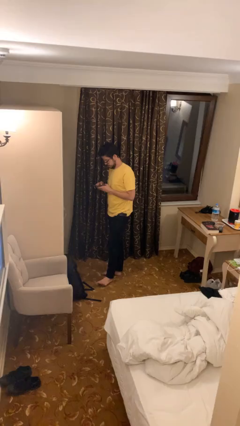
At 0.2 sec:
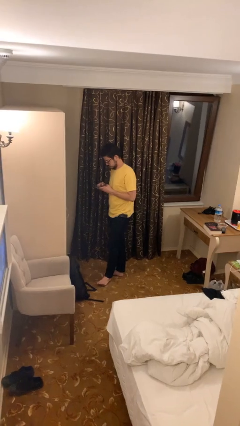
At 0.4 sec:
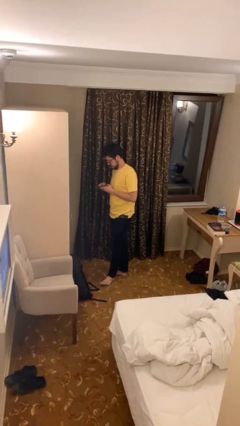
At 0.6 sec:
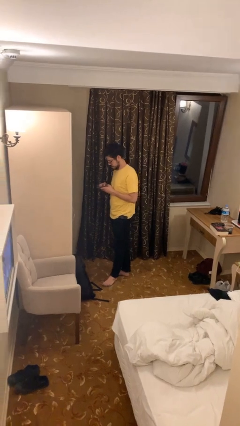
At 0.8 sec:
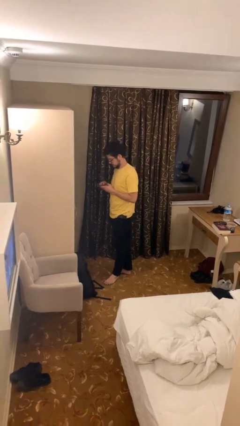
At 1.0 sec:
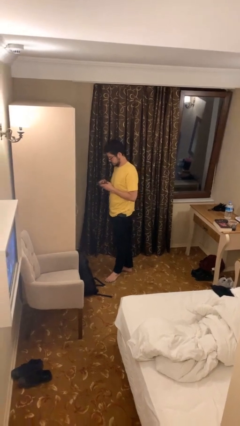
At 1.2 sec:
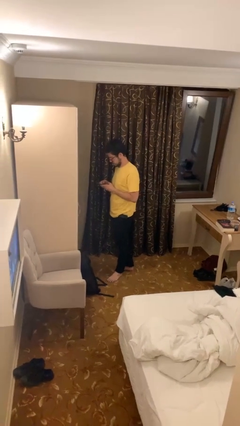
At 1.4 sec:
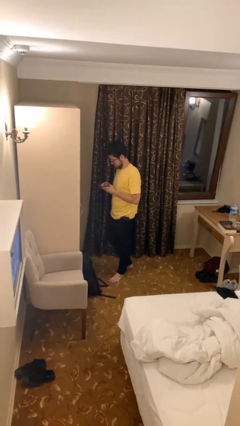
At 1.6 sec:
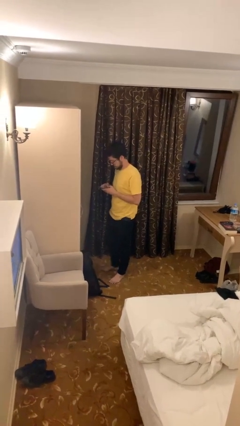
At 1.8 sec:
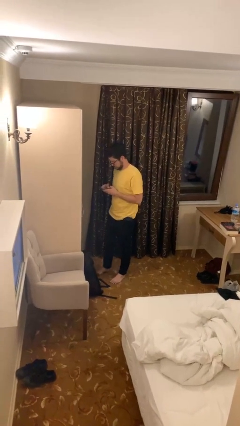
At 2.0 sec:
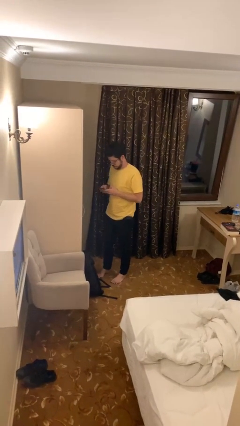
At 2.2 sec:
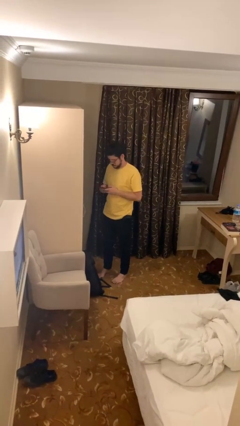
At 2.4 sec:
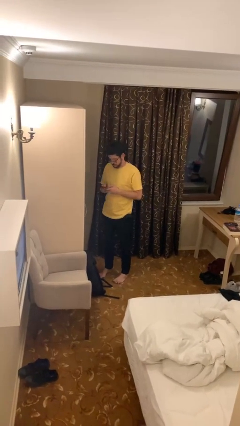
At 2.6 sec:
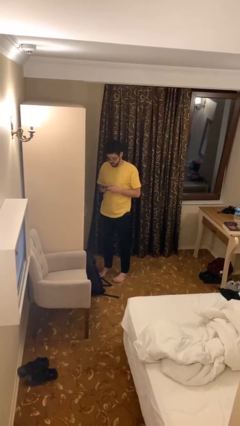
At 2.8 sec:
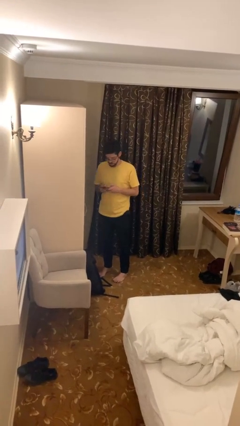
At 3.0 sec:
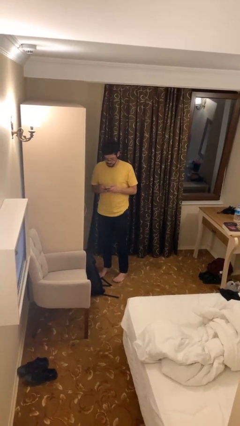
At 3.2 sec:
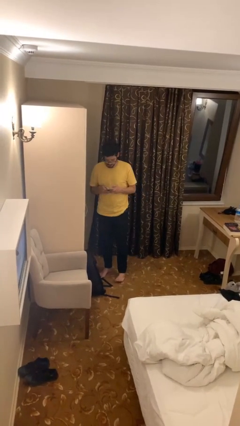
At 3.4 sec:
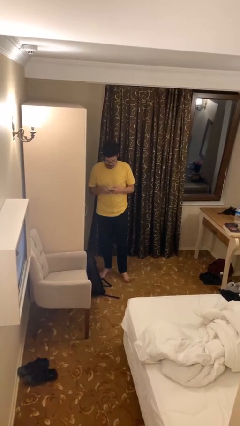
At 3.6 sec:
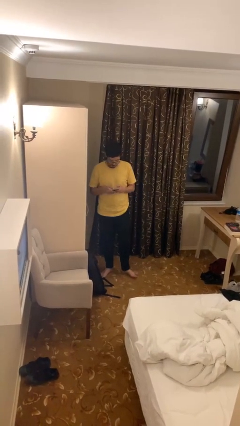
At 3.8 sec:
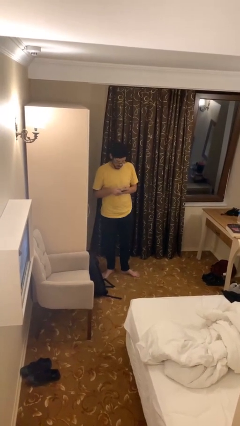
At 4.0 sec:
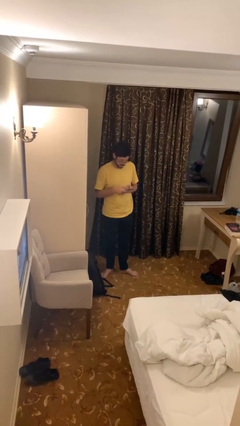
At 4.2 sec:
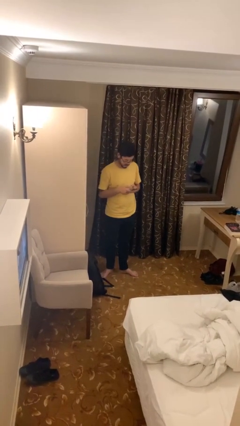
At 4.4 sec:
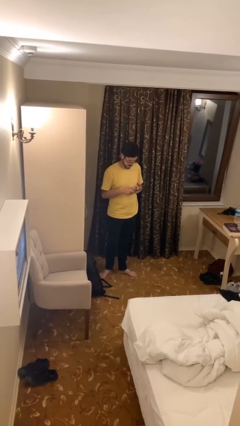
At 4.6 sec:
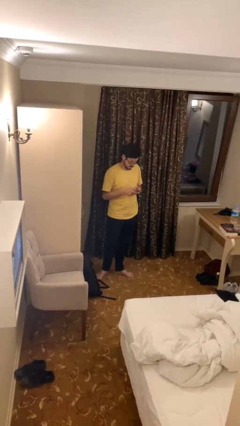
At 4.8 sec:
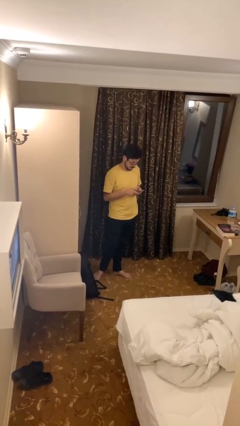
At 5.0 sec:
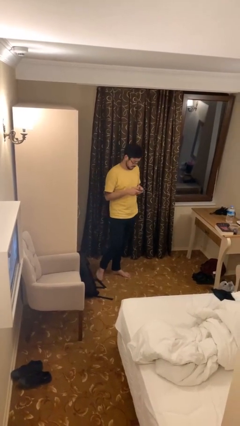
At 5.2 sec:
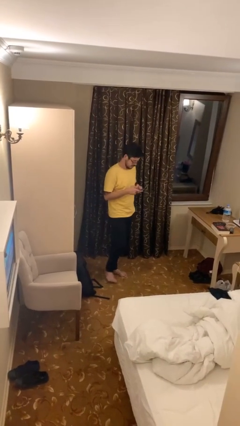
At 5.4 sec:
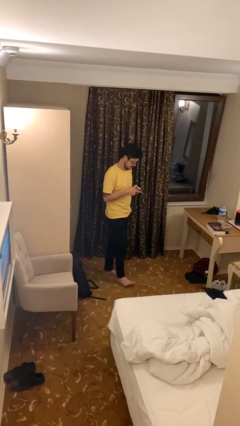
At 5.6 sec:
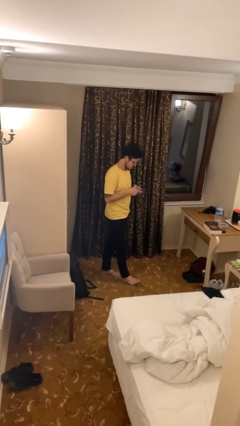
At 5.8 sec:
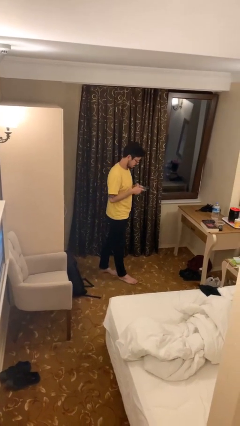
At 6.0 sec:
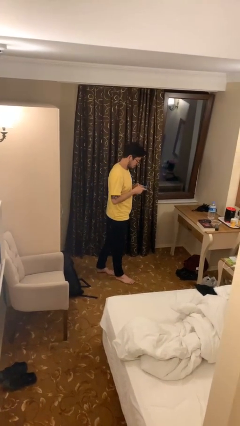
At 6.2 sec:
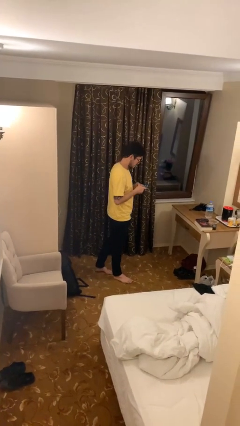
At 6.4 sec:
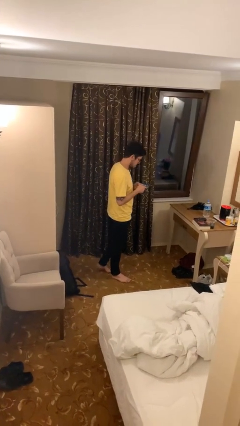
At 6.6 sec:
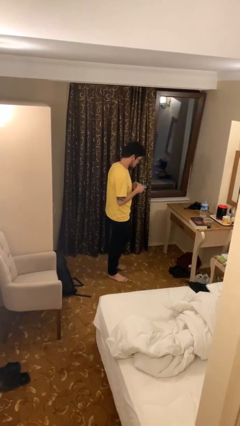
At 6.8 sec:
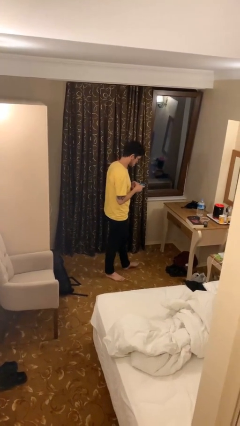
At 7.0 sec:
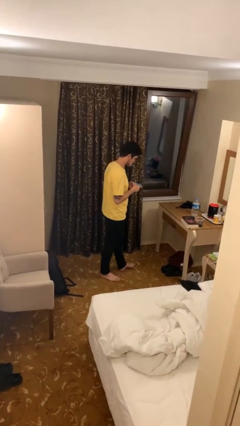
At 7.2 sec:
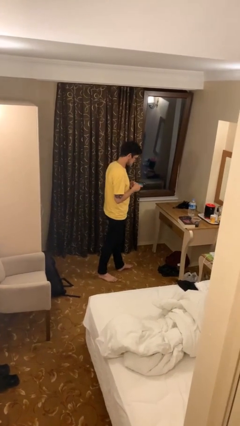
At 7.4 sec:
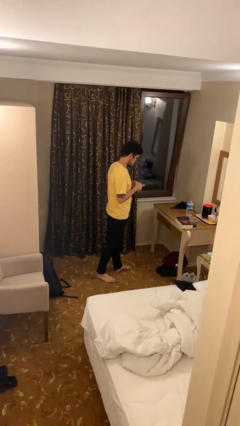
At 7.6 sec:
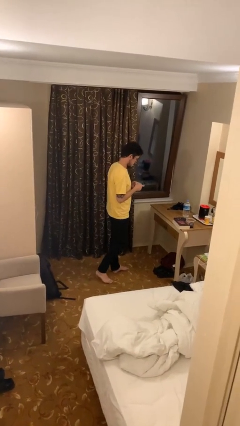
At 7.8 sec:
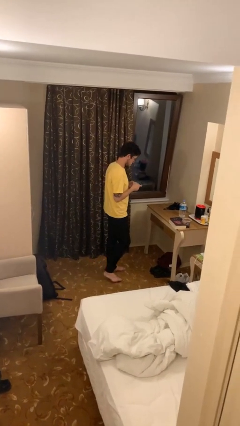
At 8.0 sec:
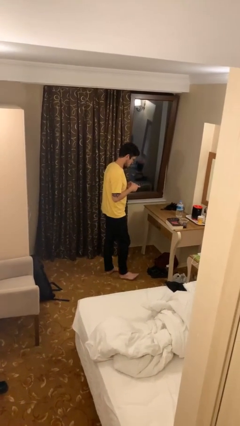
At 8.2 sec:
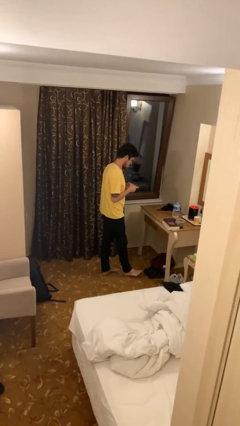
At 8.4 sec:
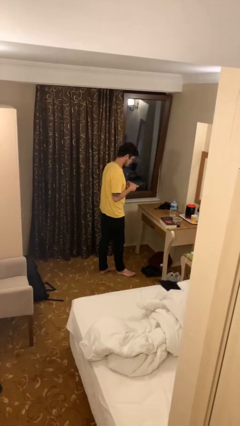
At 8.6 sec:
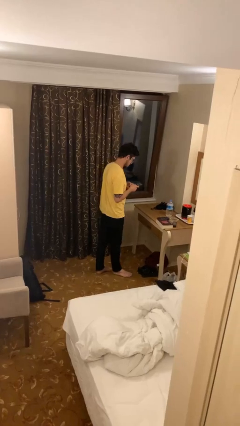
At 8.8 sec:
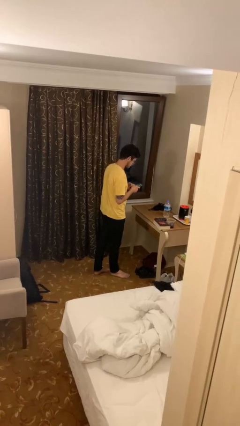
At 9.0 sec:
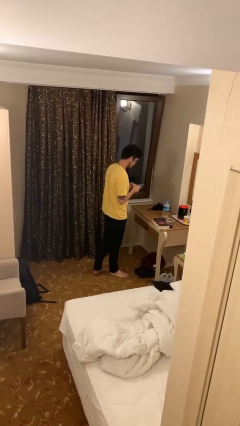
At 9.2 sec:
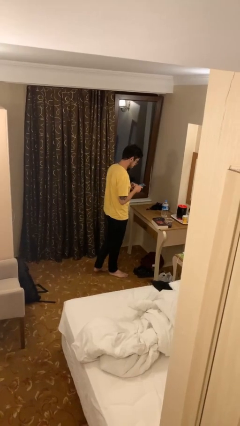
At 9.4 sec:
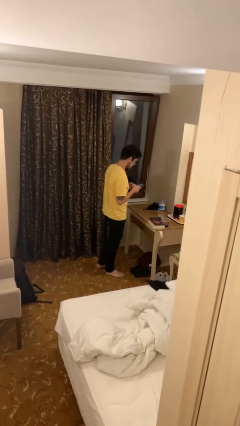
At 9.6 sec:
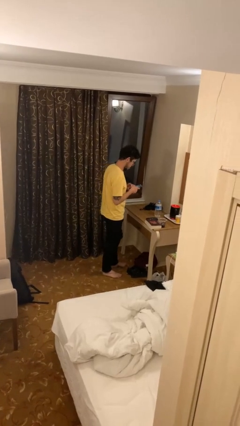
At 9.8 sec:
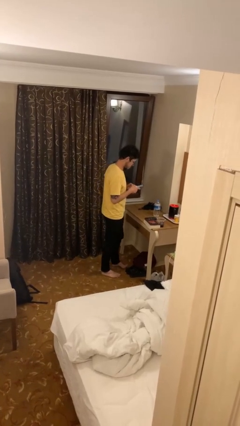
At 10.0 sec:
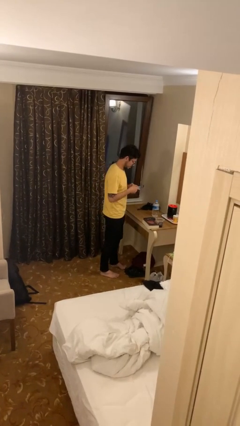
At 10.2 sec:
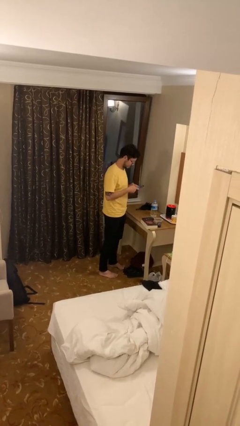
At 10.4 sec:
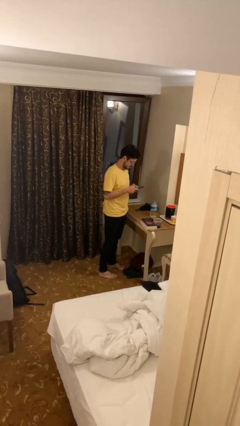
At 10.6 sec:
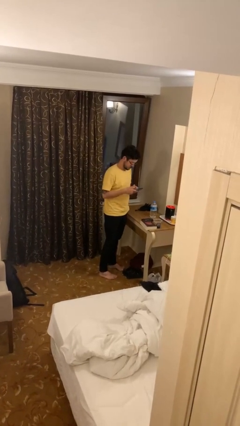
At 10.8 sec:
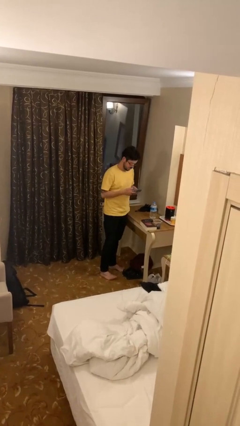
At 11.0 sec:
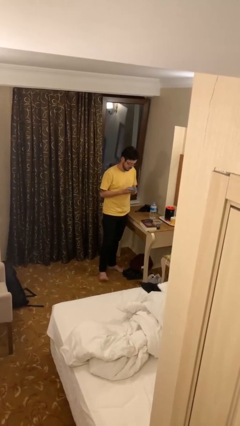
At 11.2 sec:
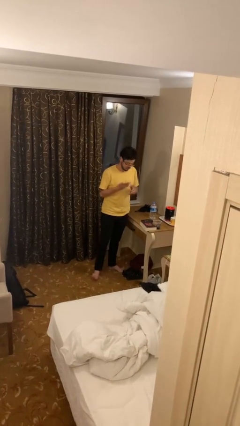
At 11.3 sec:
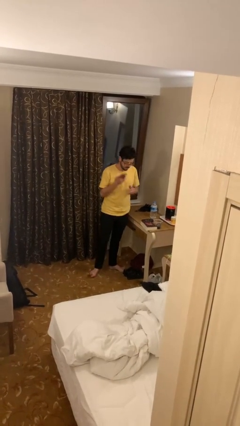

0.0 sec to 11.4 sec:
person texts on phone

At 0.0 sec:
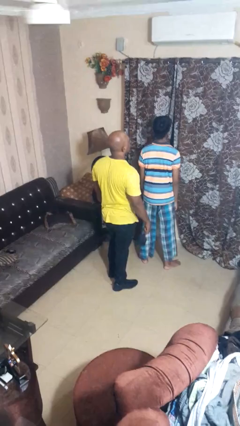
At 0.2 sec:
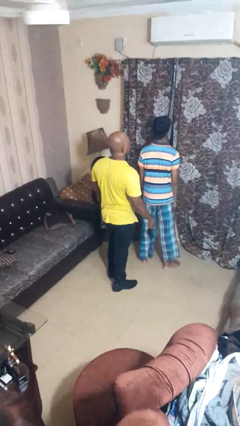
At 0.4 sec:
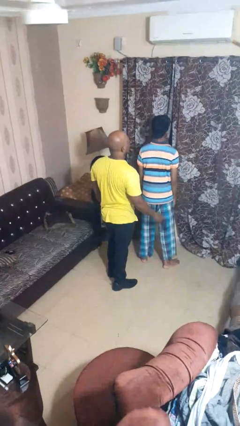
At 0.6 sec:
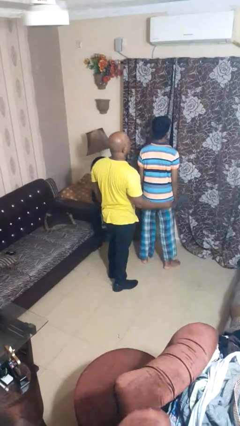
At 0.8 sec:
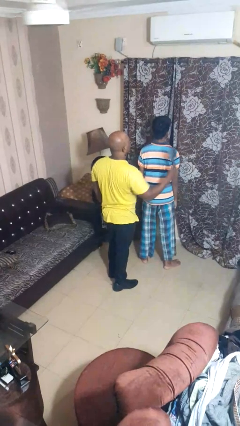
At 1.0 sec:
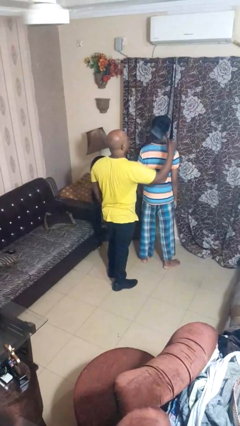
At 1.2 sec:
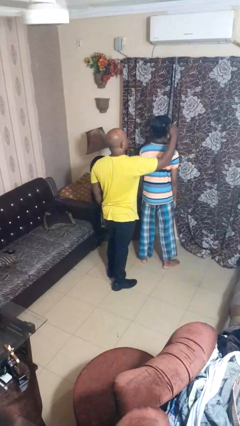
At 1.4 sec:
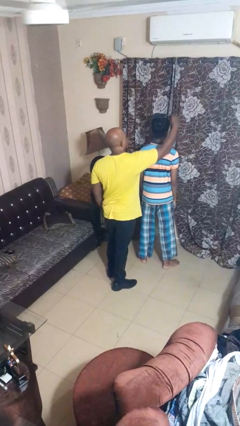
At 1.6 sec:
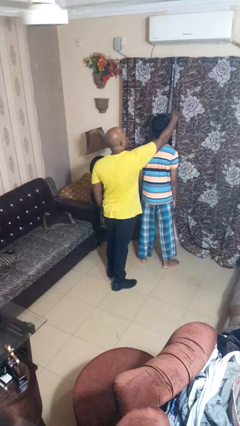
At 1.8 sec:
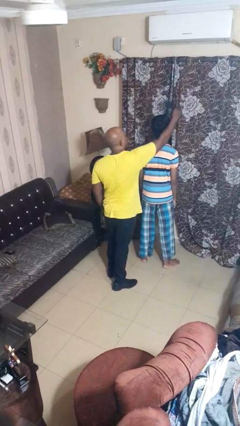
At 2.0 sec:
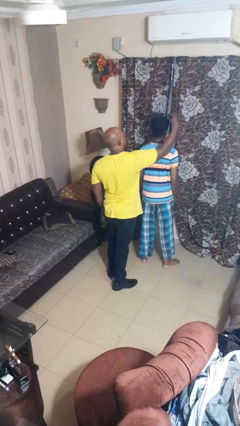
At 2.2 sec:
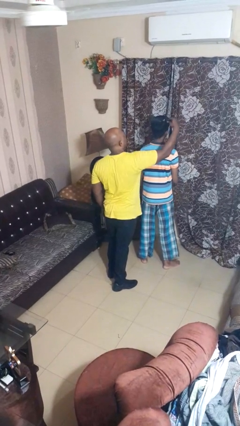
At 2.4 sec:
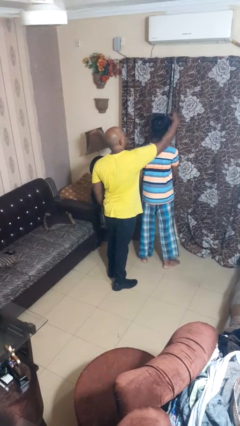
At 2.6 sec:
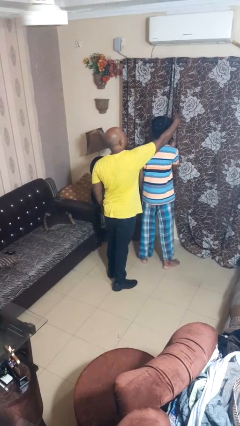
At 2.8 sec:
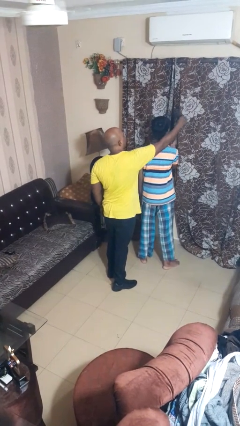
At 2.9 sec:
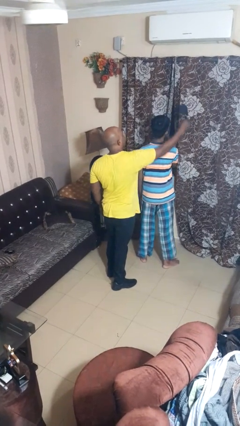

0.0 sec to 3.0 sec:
person brushes hair of person

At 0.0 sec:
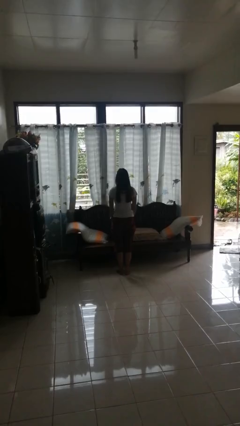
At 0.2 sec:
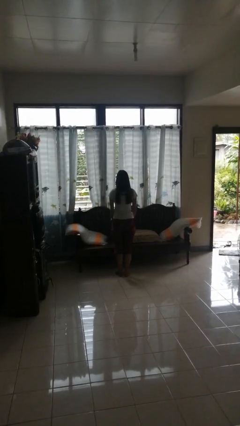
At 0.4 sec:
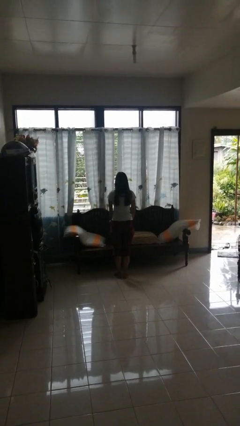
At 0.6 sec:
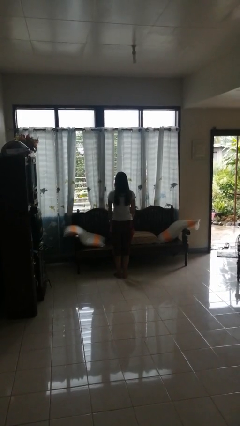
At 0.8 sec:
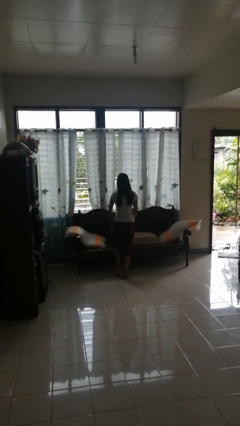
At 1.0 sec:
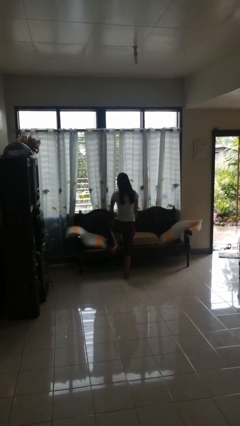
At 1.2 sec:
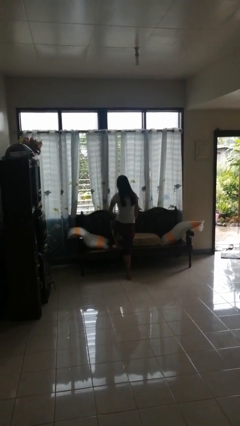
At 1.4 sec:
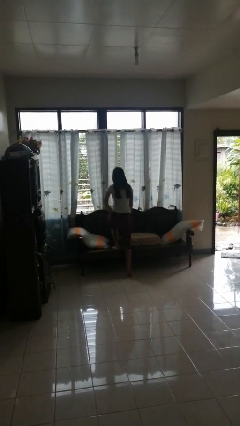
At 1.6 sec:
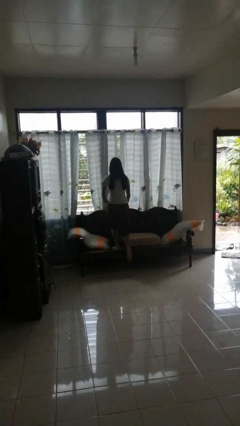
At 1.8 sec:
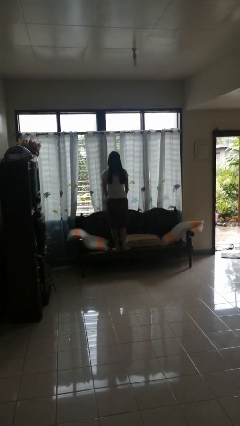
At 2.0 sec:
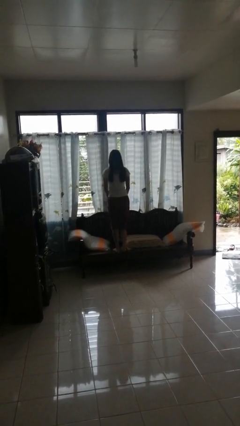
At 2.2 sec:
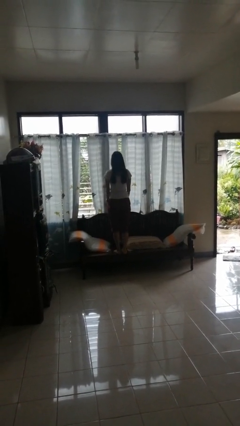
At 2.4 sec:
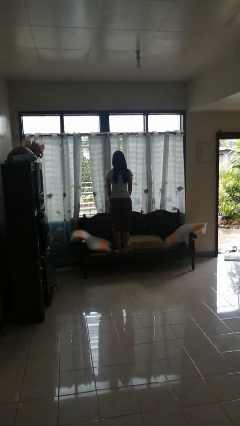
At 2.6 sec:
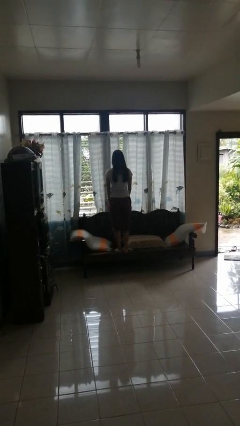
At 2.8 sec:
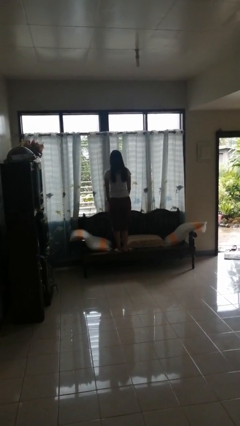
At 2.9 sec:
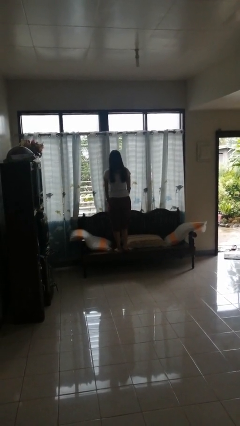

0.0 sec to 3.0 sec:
person climbs on couch

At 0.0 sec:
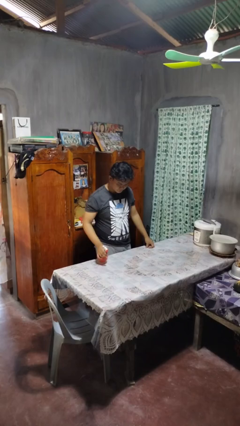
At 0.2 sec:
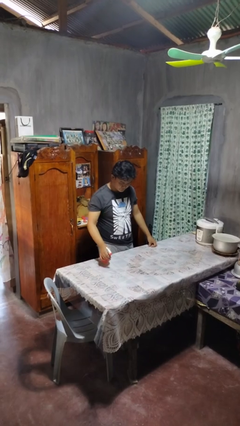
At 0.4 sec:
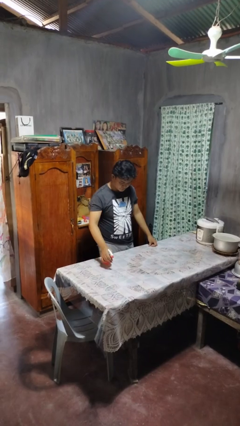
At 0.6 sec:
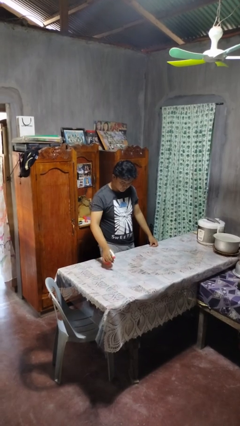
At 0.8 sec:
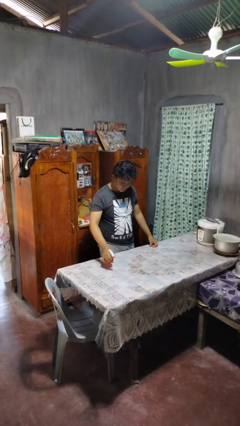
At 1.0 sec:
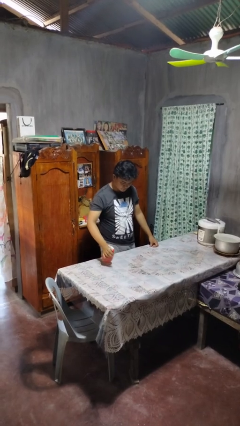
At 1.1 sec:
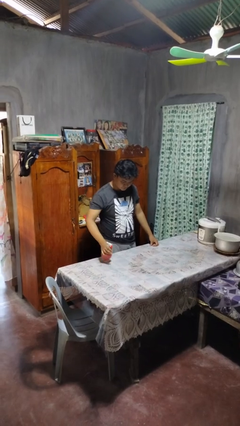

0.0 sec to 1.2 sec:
person sprays from bottle
